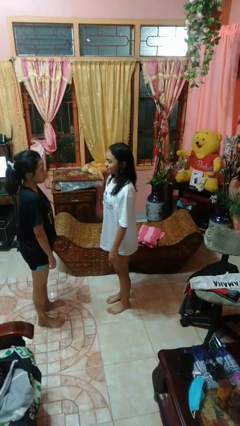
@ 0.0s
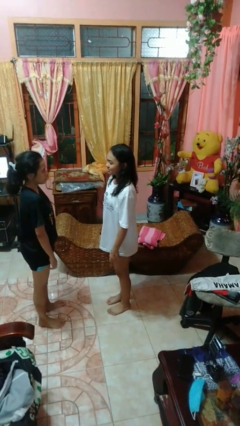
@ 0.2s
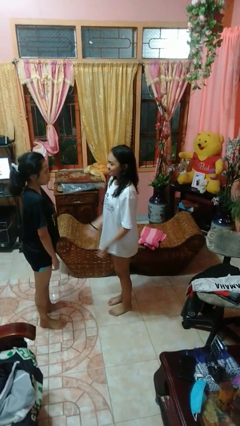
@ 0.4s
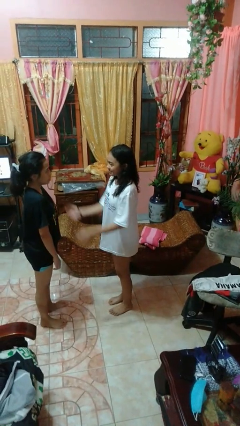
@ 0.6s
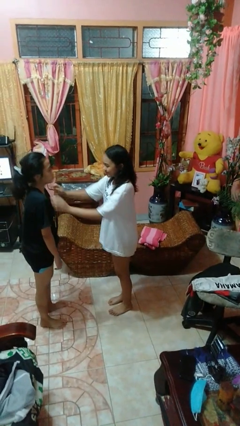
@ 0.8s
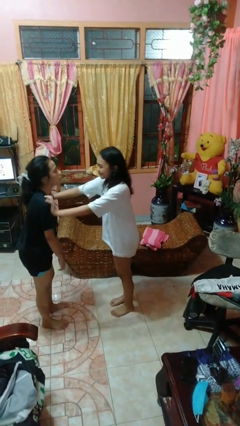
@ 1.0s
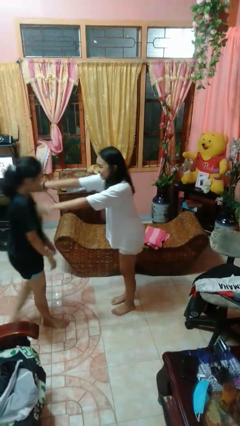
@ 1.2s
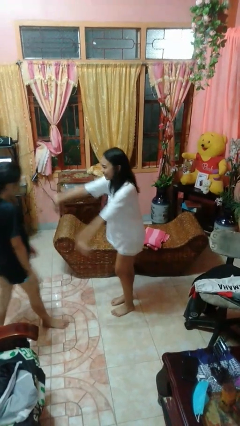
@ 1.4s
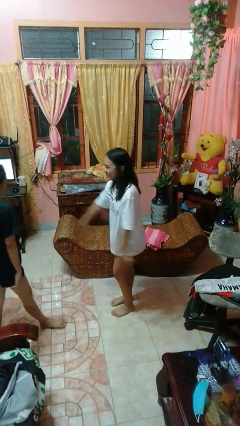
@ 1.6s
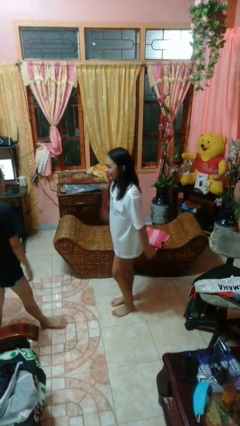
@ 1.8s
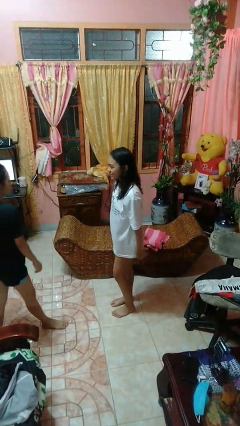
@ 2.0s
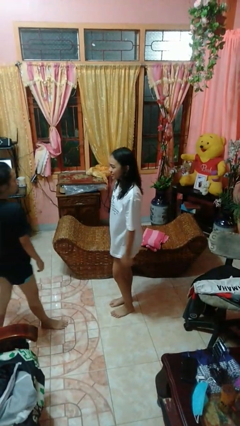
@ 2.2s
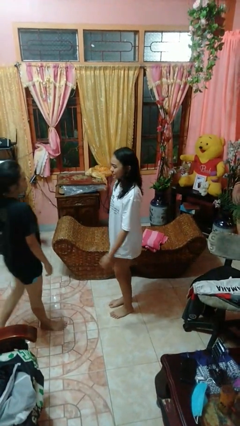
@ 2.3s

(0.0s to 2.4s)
person shoves person

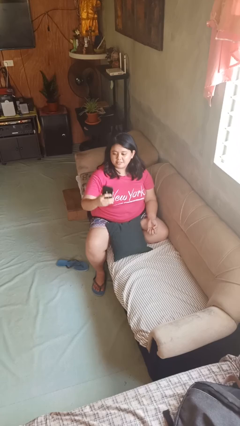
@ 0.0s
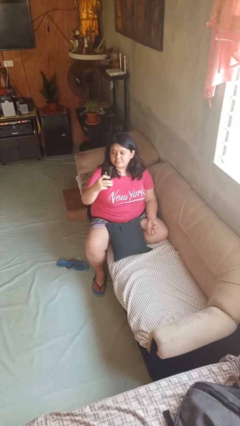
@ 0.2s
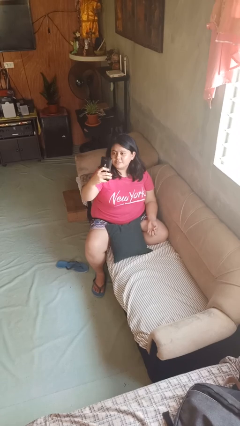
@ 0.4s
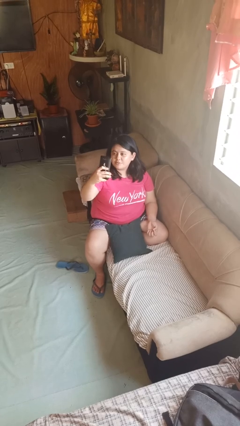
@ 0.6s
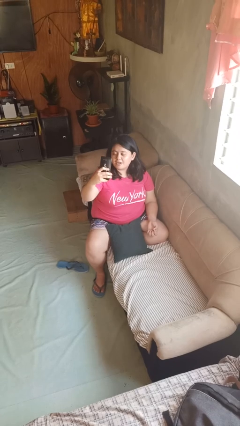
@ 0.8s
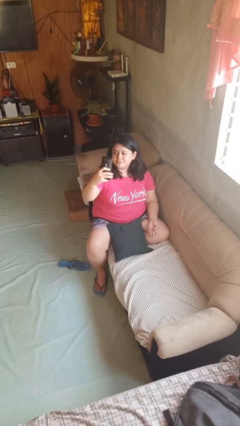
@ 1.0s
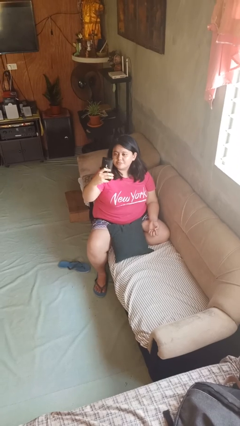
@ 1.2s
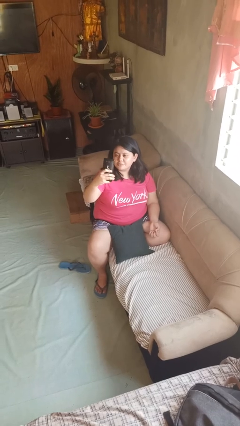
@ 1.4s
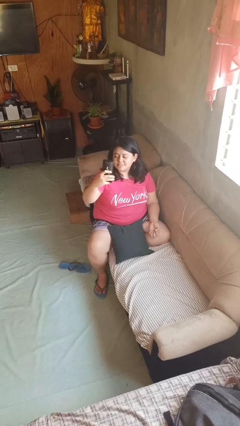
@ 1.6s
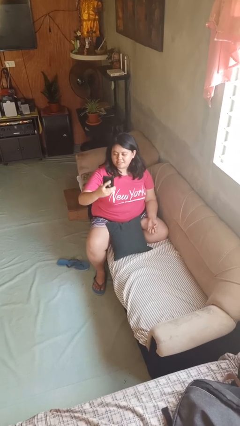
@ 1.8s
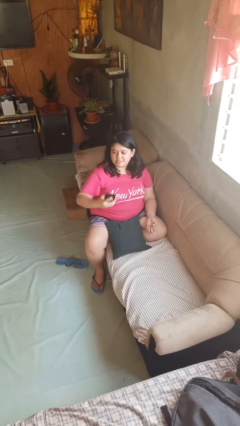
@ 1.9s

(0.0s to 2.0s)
person takes selfie

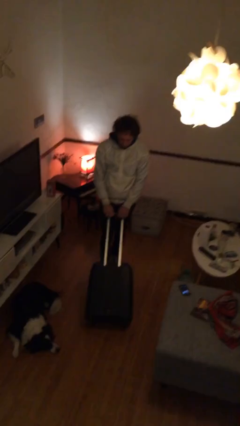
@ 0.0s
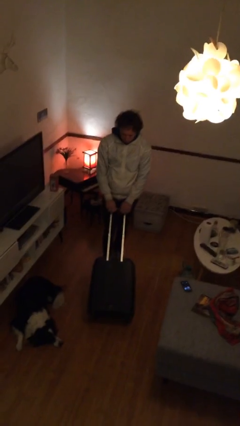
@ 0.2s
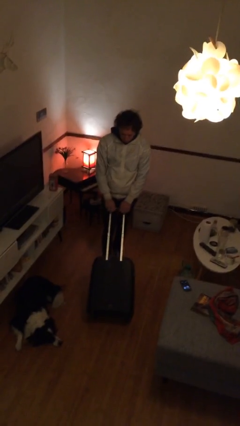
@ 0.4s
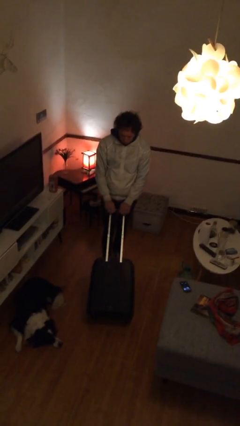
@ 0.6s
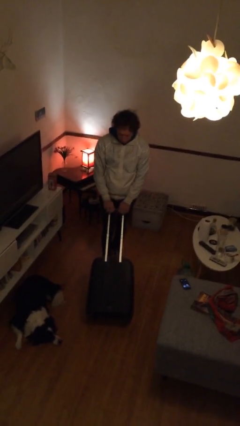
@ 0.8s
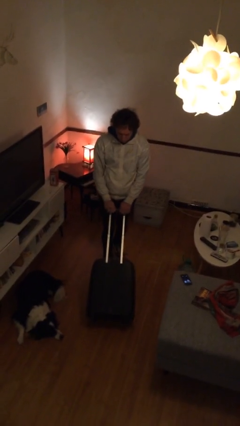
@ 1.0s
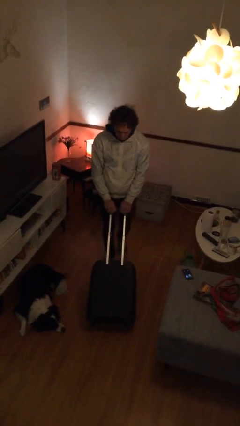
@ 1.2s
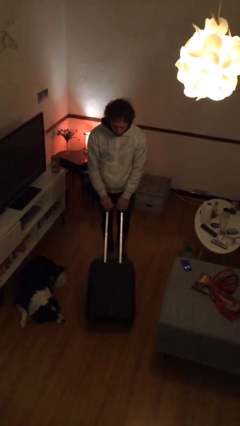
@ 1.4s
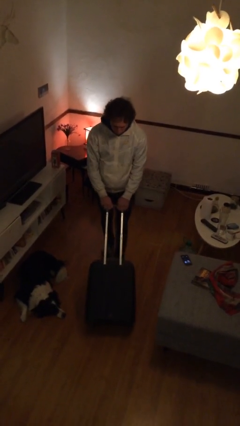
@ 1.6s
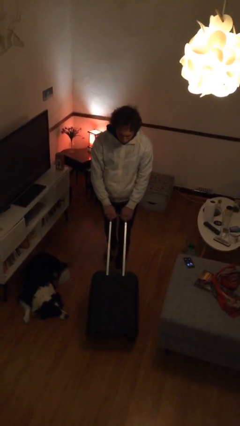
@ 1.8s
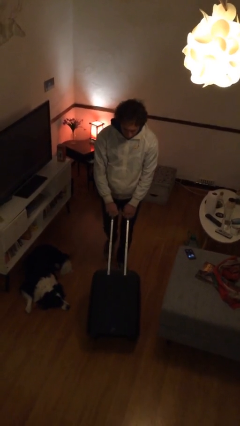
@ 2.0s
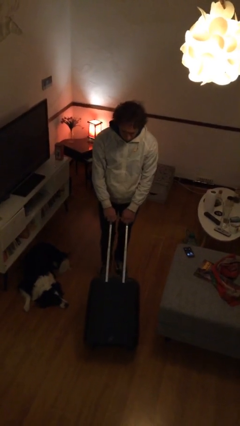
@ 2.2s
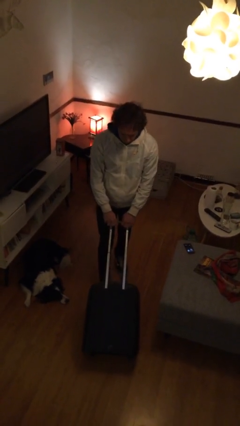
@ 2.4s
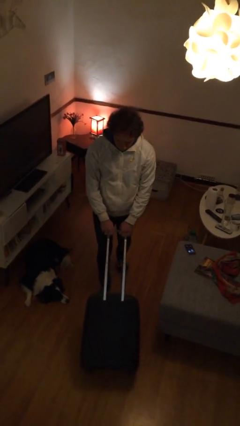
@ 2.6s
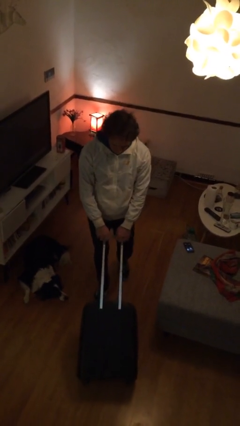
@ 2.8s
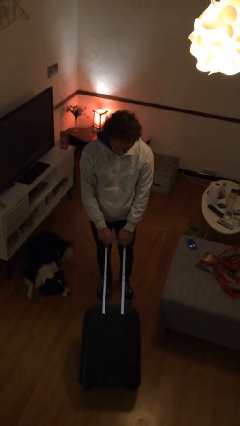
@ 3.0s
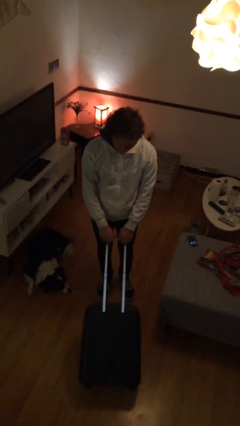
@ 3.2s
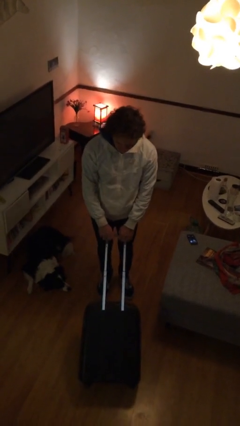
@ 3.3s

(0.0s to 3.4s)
person pushes wheeled cart

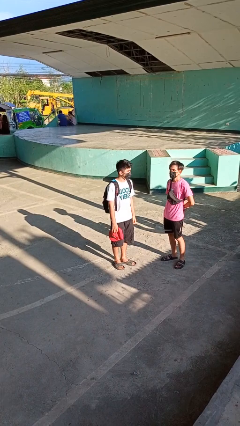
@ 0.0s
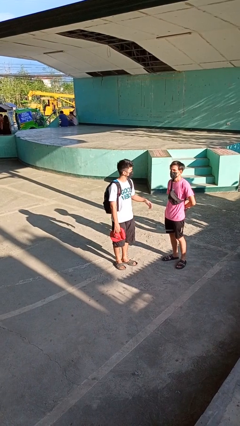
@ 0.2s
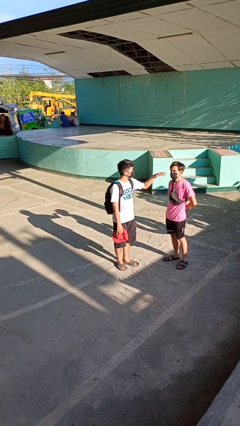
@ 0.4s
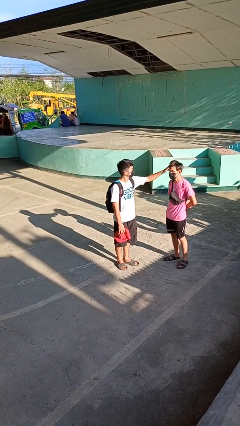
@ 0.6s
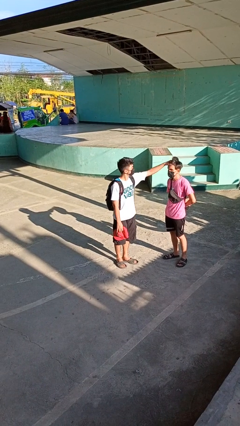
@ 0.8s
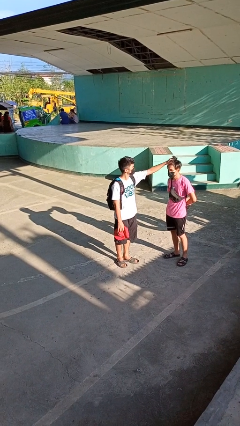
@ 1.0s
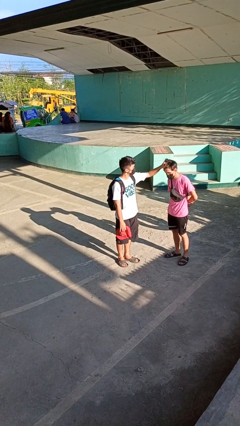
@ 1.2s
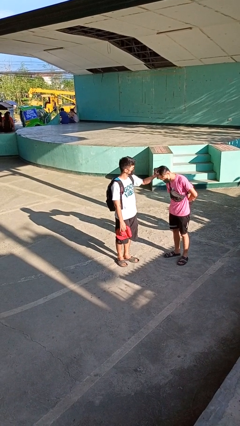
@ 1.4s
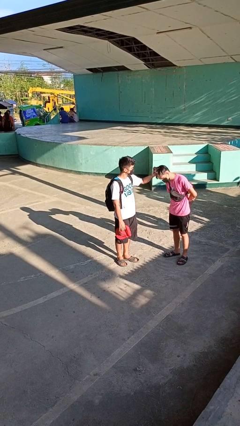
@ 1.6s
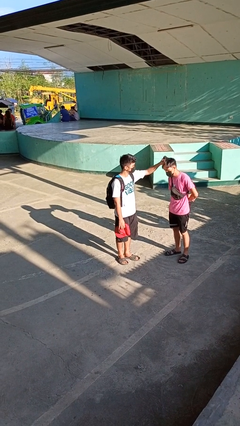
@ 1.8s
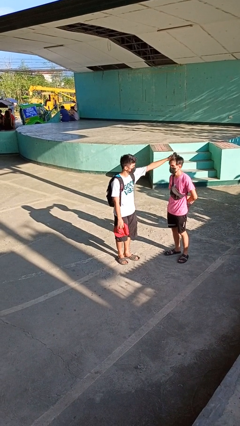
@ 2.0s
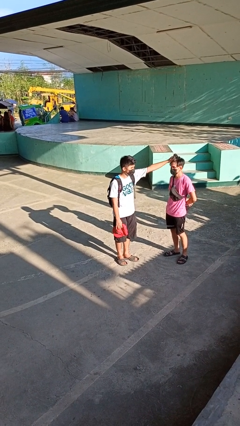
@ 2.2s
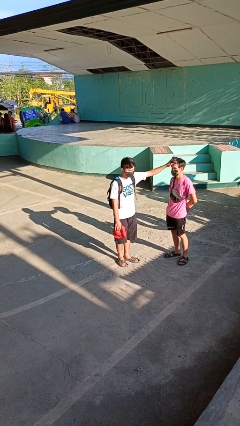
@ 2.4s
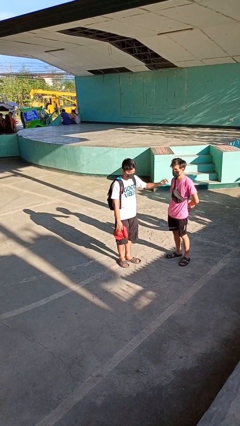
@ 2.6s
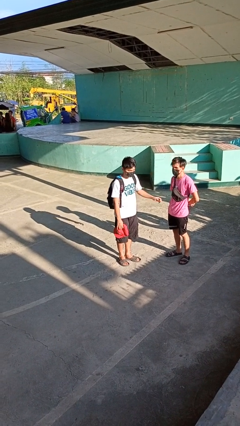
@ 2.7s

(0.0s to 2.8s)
person grabs person by hair

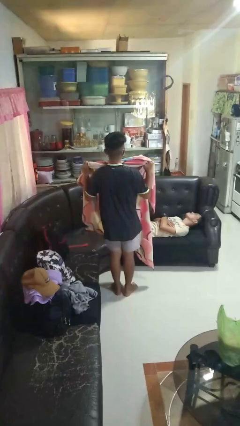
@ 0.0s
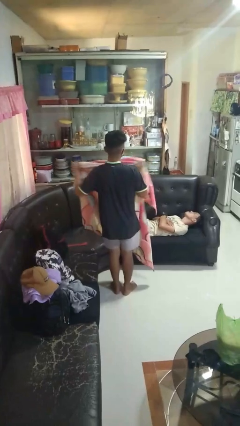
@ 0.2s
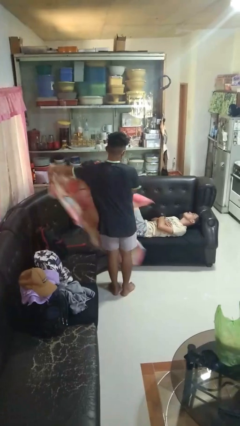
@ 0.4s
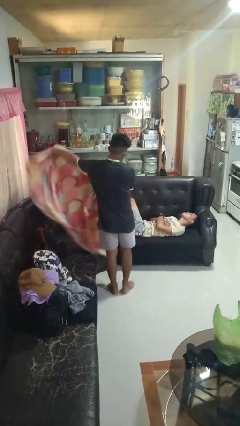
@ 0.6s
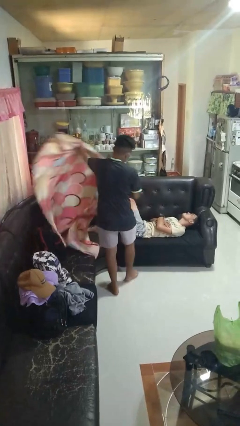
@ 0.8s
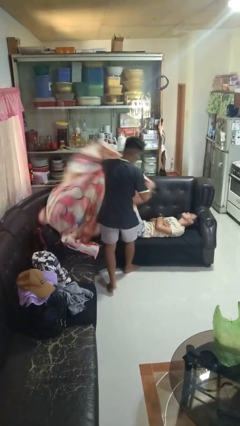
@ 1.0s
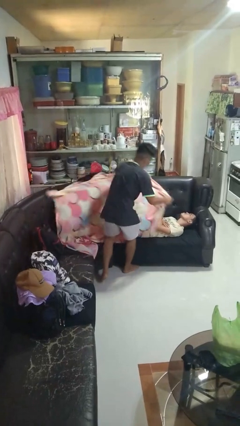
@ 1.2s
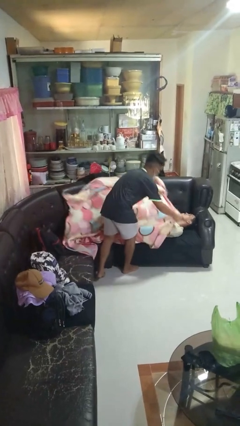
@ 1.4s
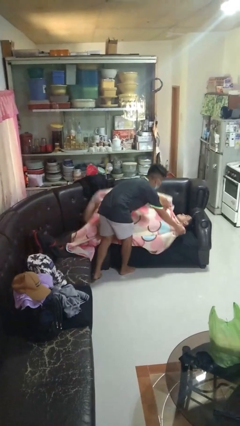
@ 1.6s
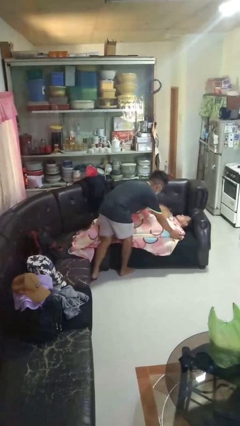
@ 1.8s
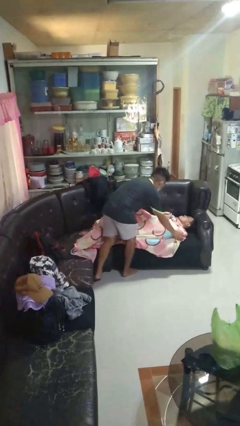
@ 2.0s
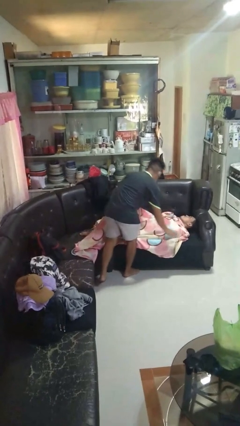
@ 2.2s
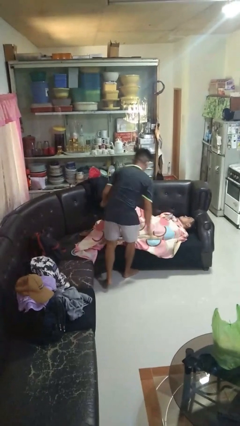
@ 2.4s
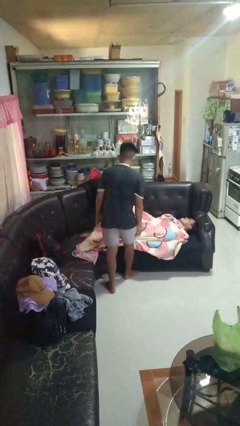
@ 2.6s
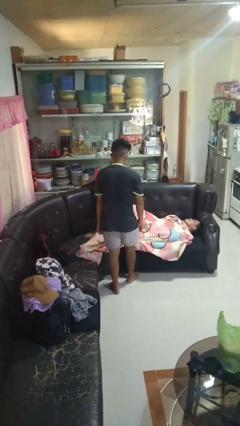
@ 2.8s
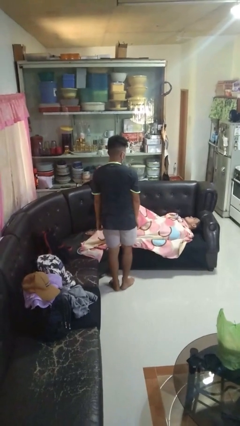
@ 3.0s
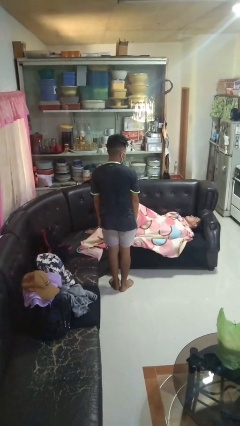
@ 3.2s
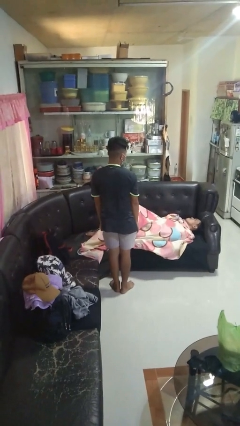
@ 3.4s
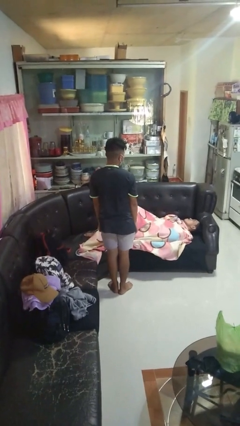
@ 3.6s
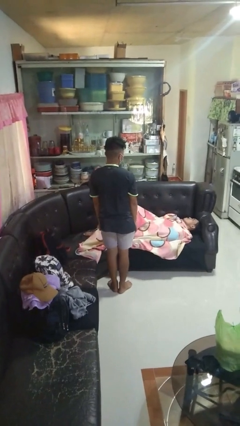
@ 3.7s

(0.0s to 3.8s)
person covers friend with blanket

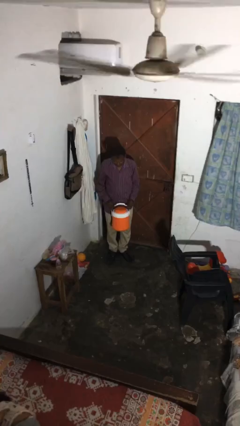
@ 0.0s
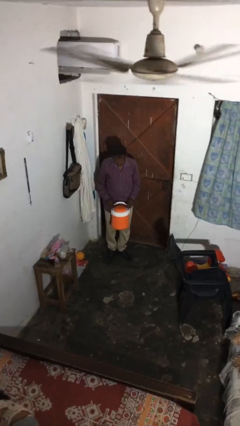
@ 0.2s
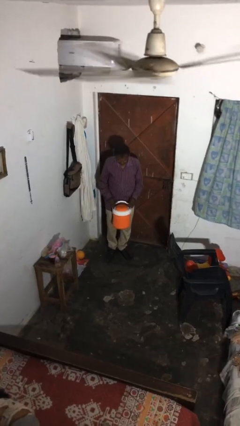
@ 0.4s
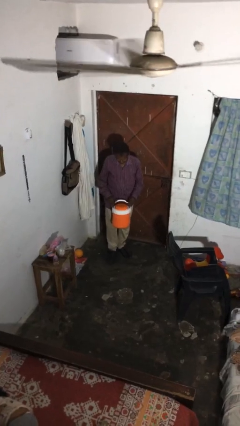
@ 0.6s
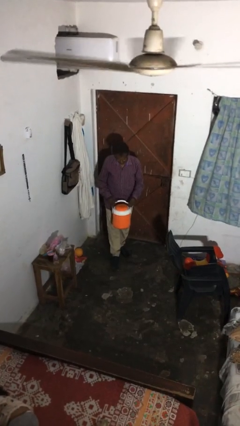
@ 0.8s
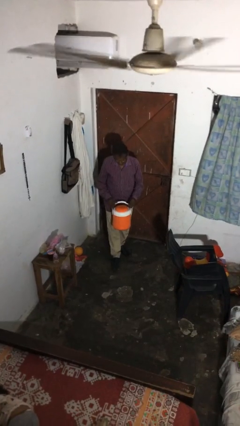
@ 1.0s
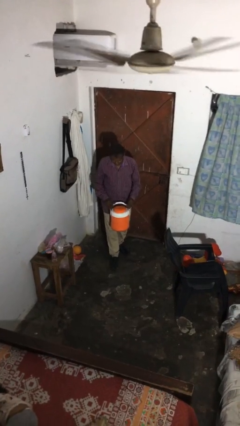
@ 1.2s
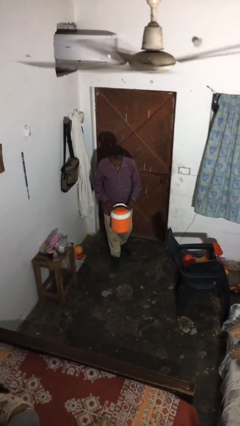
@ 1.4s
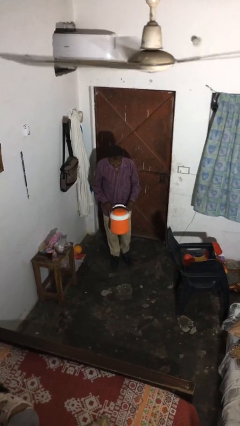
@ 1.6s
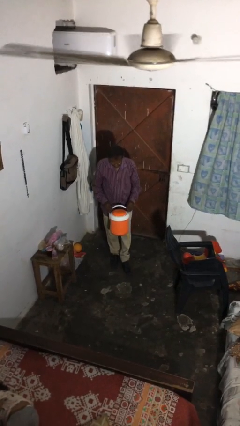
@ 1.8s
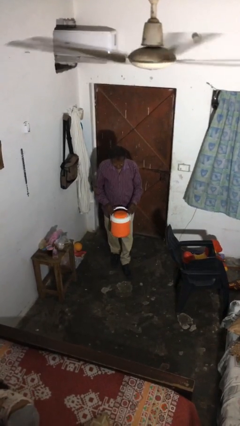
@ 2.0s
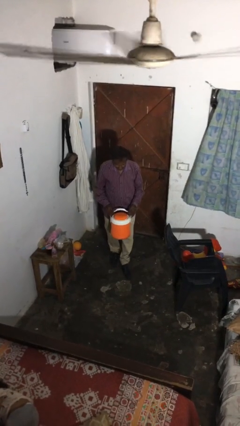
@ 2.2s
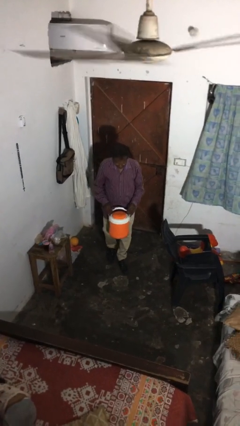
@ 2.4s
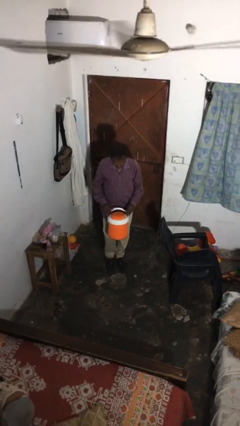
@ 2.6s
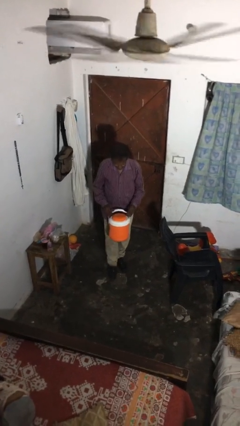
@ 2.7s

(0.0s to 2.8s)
person carries heavy object

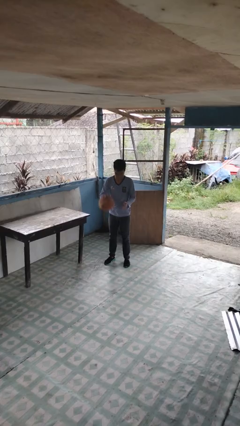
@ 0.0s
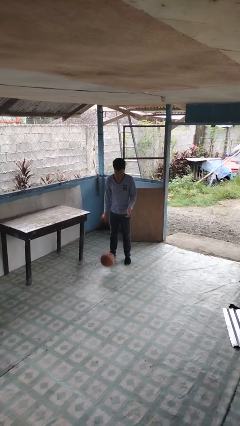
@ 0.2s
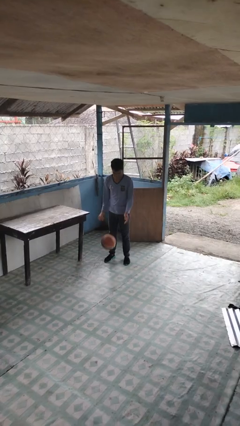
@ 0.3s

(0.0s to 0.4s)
person bounces ball on floor
